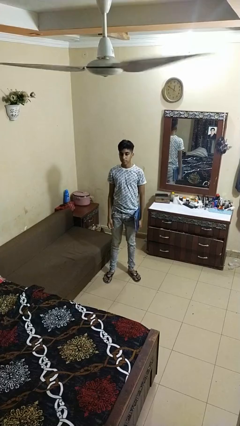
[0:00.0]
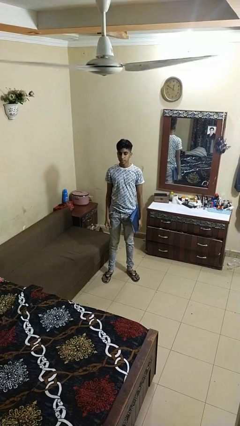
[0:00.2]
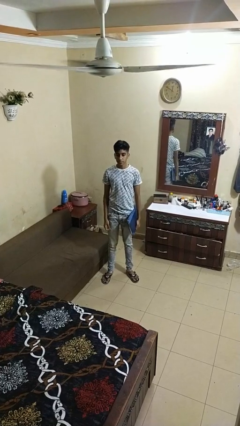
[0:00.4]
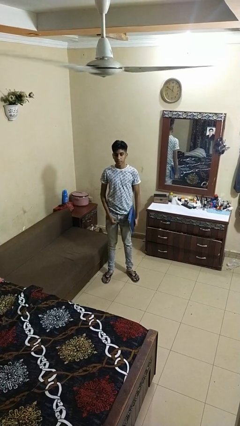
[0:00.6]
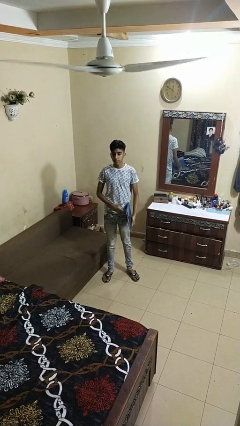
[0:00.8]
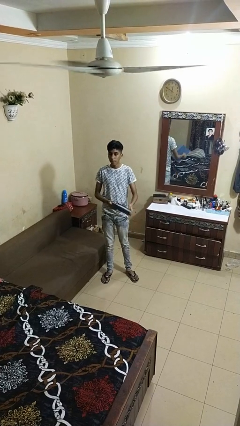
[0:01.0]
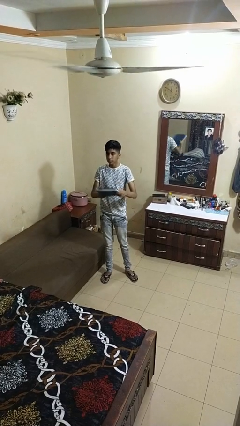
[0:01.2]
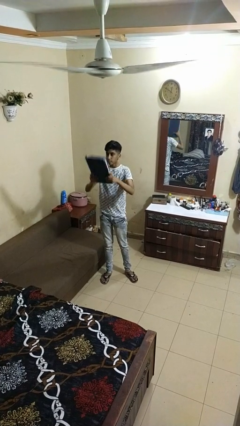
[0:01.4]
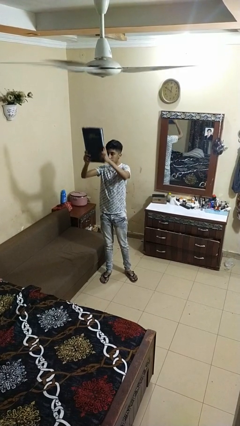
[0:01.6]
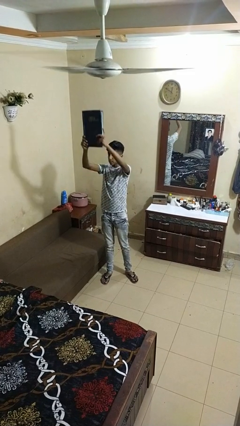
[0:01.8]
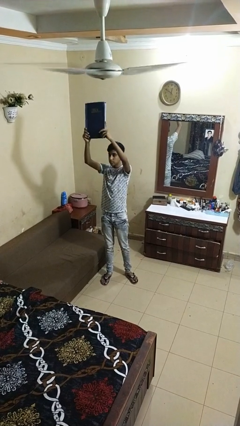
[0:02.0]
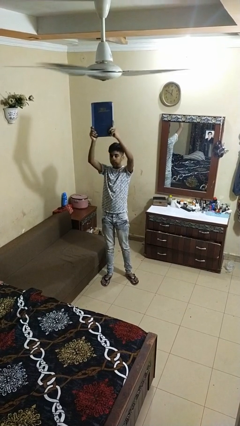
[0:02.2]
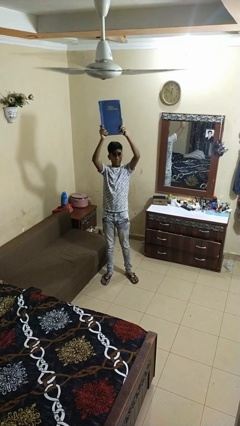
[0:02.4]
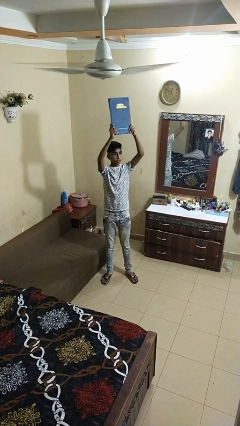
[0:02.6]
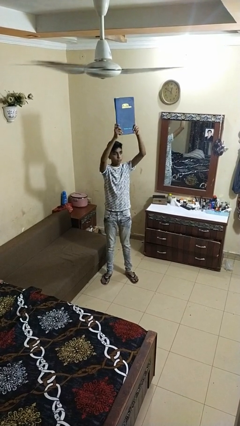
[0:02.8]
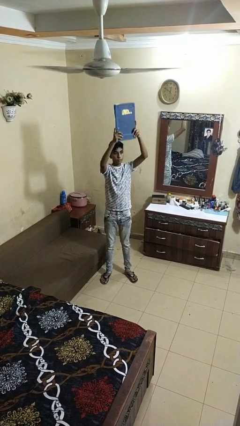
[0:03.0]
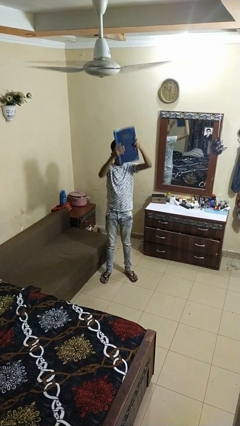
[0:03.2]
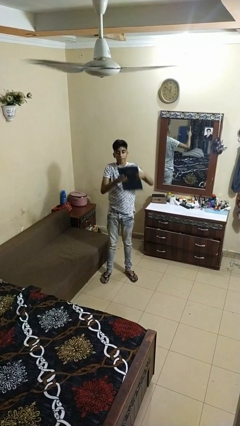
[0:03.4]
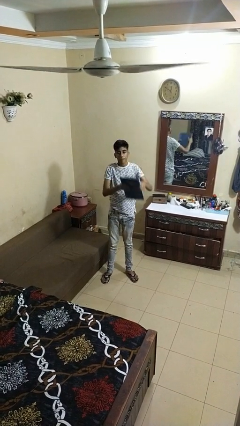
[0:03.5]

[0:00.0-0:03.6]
person holds object above head

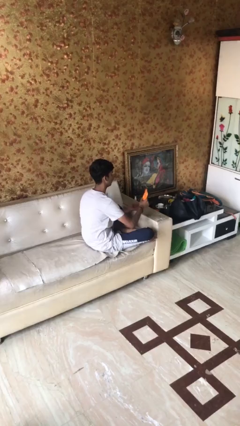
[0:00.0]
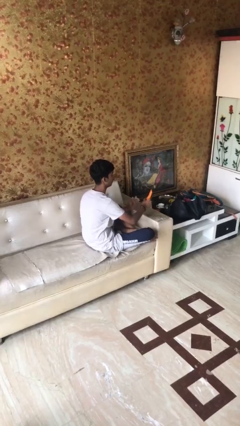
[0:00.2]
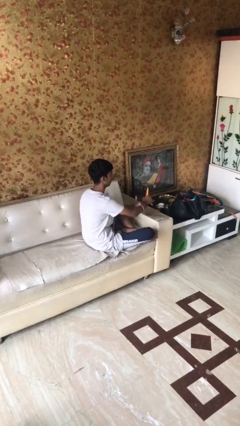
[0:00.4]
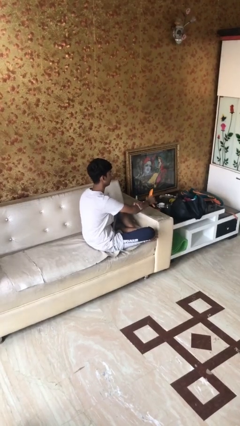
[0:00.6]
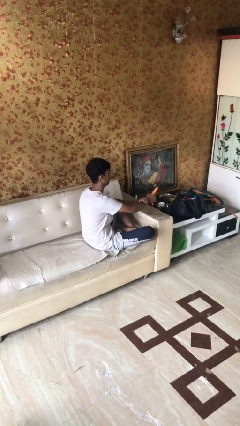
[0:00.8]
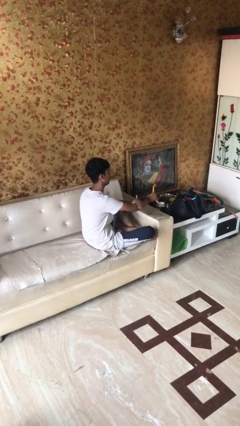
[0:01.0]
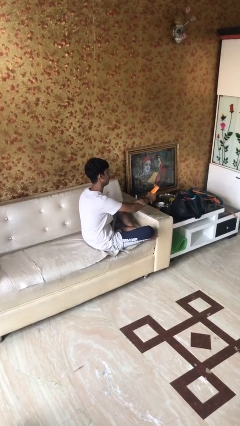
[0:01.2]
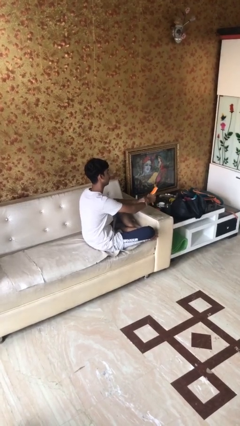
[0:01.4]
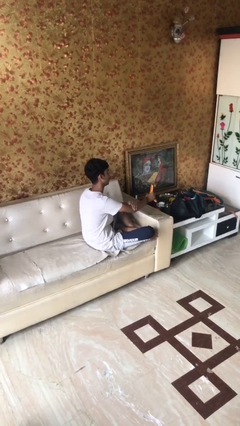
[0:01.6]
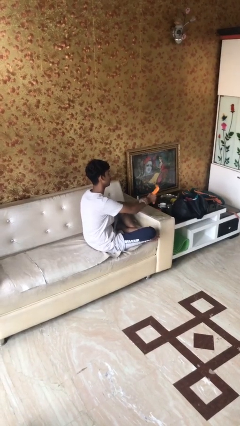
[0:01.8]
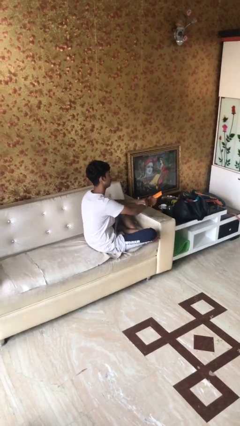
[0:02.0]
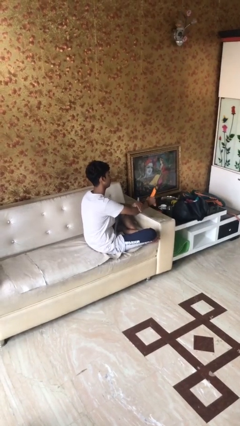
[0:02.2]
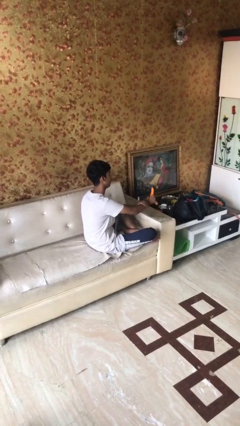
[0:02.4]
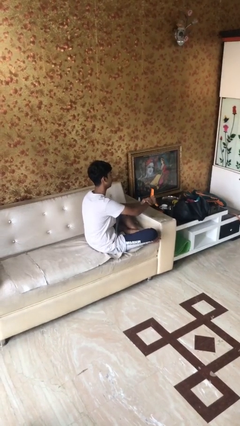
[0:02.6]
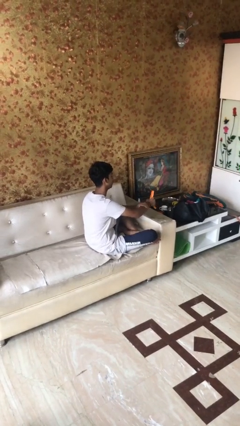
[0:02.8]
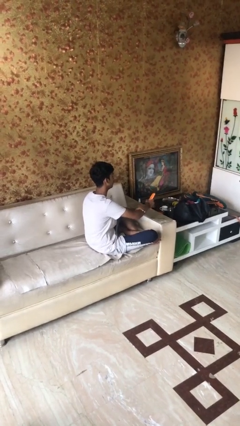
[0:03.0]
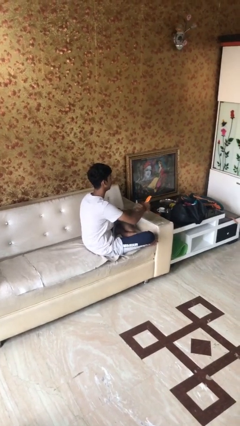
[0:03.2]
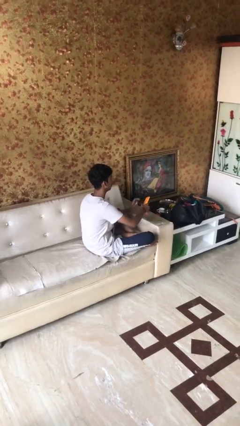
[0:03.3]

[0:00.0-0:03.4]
person applies sunscreen

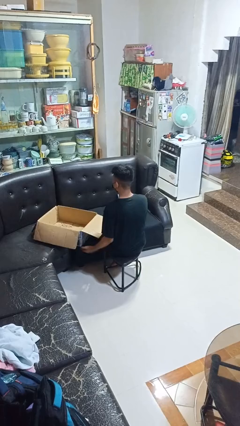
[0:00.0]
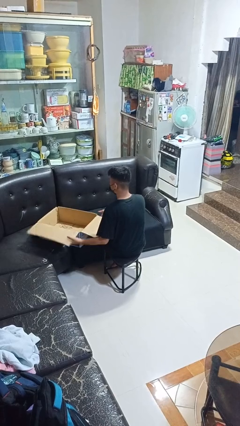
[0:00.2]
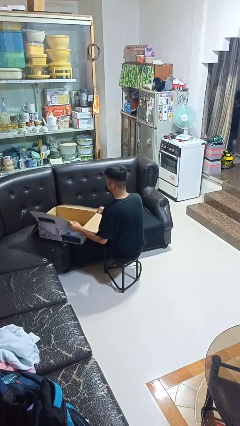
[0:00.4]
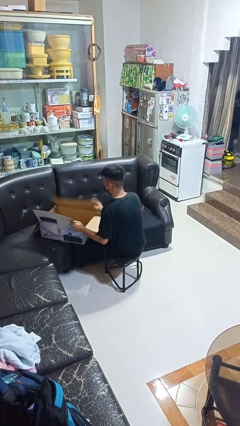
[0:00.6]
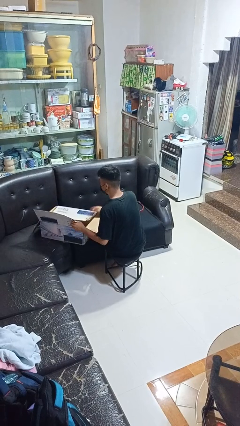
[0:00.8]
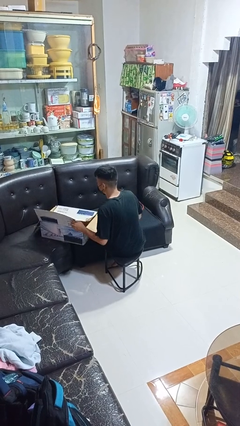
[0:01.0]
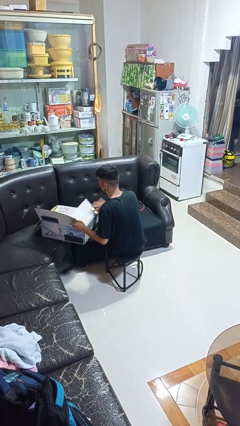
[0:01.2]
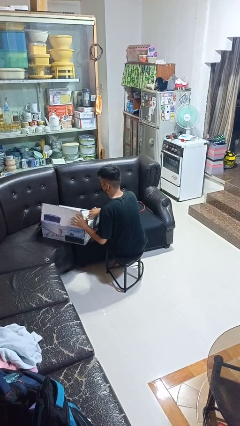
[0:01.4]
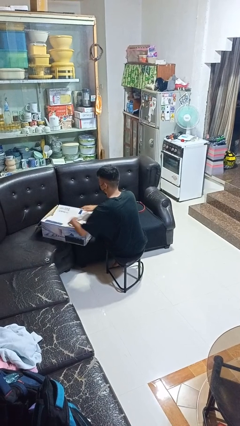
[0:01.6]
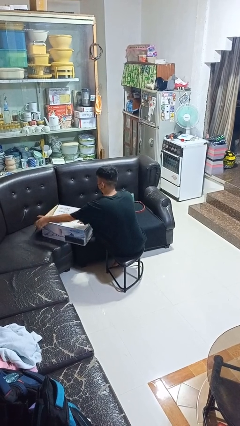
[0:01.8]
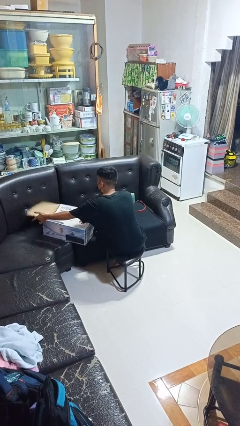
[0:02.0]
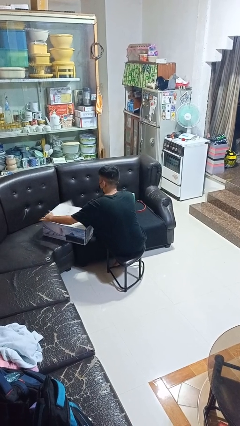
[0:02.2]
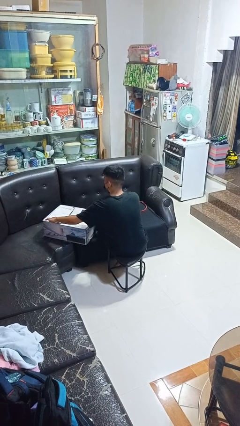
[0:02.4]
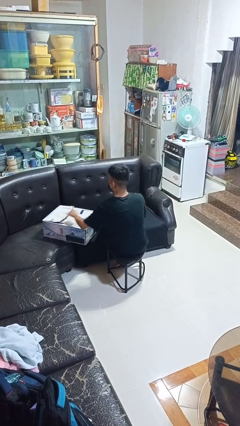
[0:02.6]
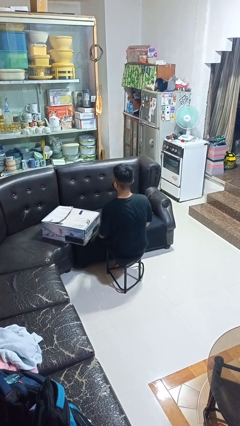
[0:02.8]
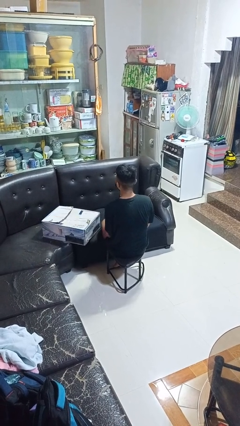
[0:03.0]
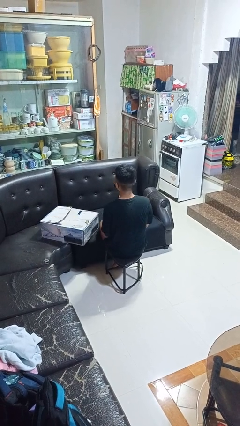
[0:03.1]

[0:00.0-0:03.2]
person closes box

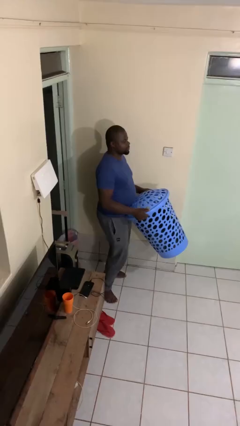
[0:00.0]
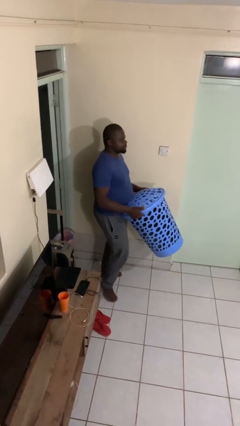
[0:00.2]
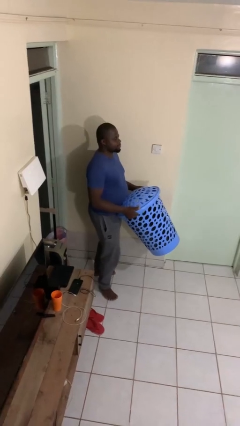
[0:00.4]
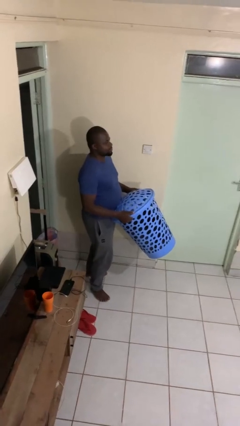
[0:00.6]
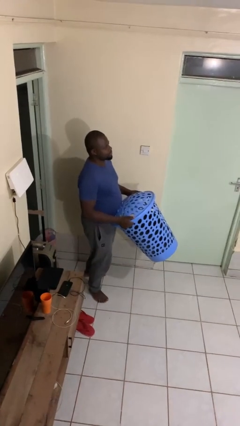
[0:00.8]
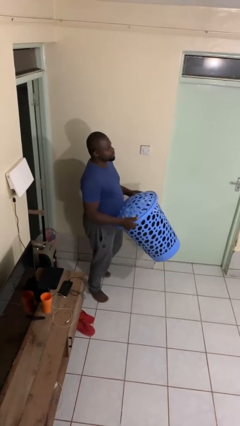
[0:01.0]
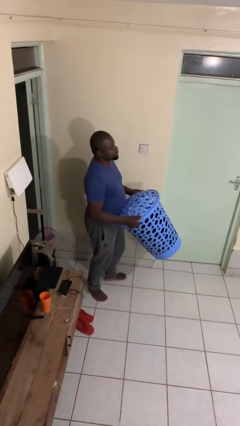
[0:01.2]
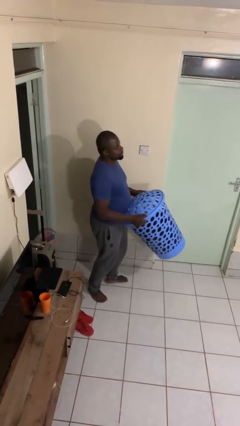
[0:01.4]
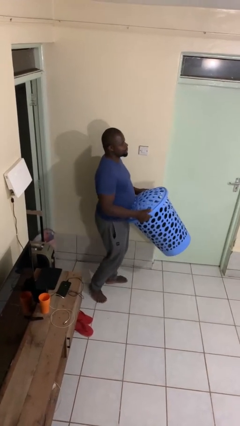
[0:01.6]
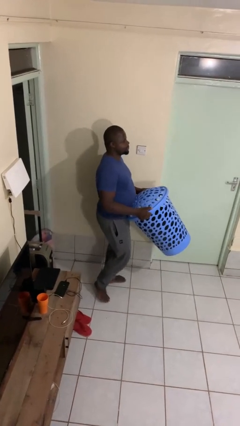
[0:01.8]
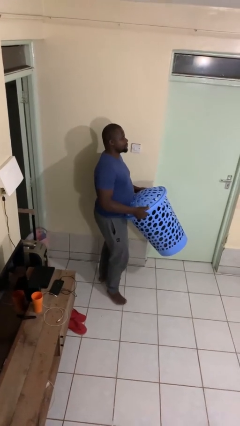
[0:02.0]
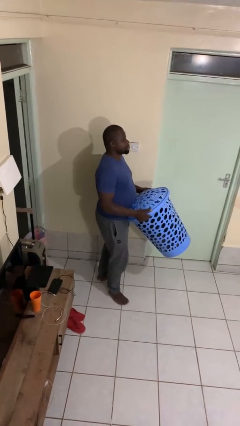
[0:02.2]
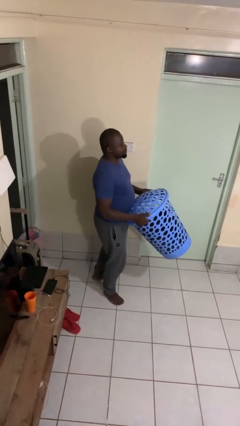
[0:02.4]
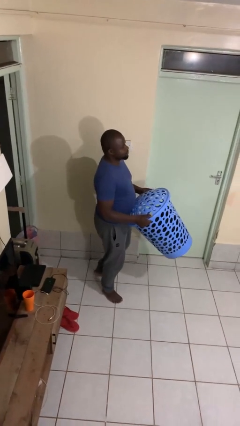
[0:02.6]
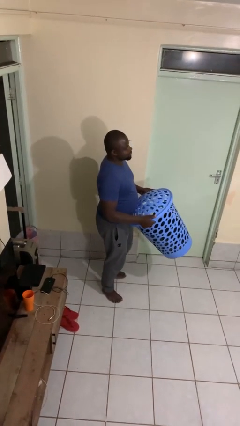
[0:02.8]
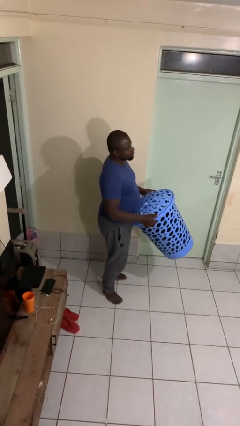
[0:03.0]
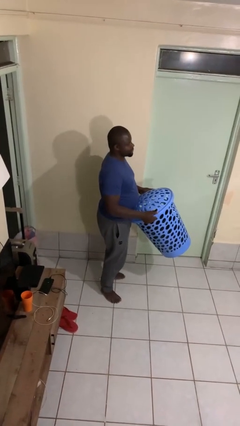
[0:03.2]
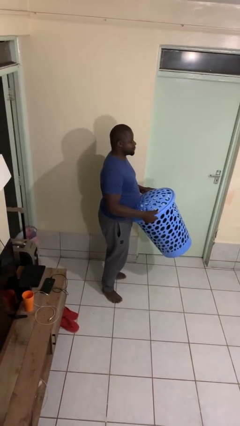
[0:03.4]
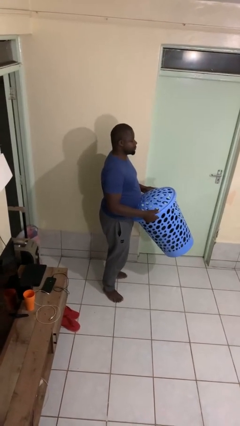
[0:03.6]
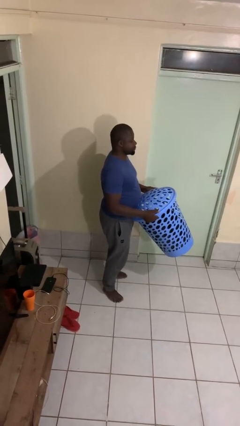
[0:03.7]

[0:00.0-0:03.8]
person carries laundry basket

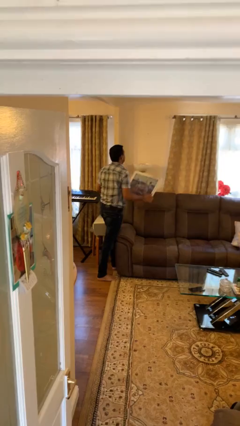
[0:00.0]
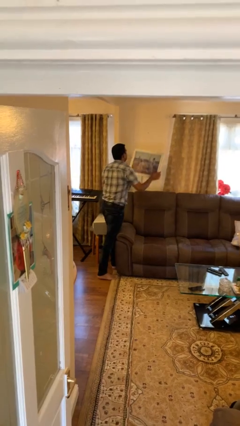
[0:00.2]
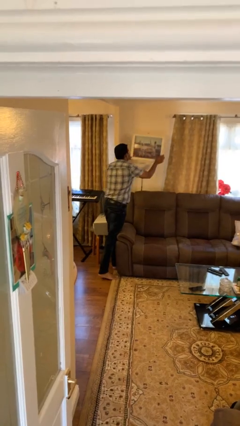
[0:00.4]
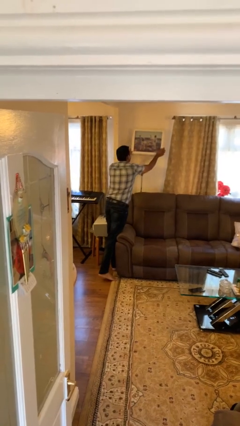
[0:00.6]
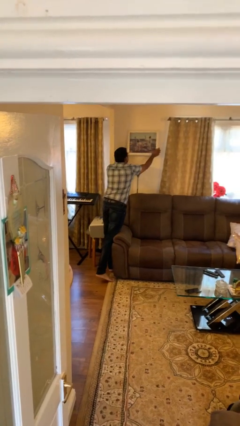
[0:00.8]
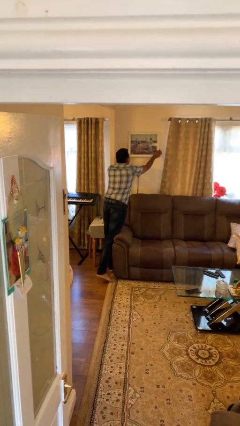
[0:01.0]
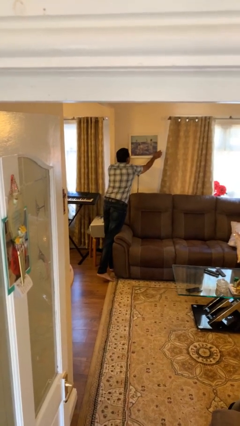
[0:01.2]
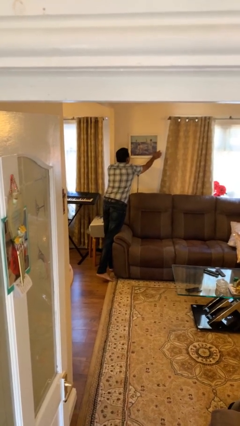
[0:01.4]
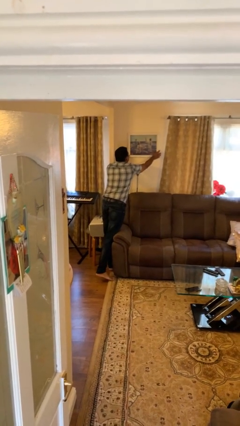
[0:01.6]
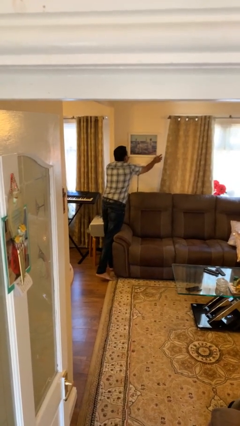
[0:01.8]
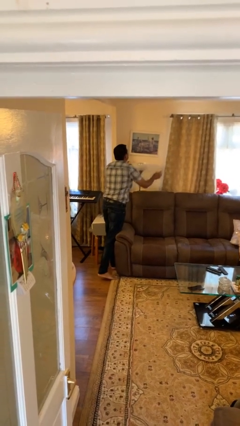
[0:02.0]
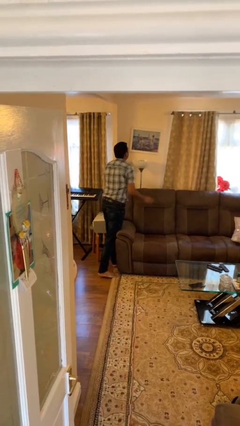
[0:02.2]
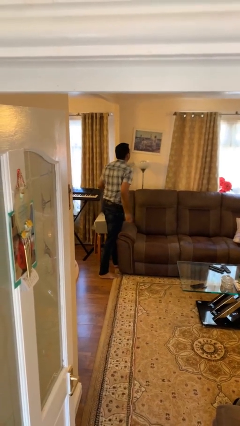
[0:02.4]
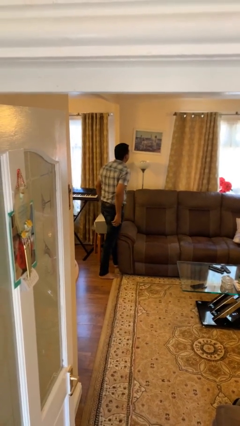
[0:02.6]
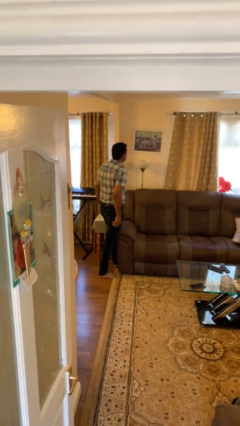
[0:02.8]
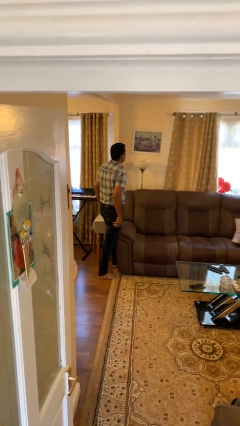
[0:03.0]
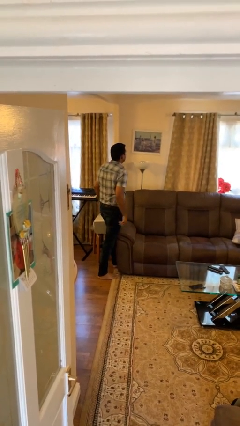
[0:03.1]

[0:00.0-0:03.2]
person puts up picture frame

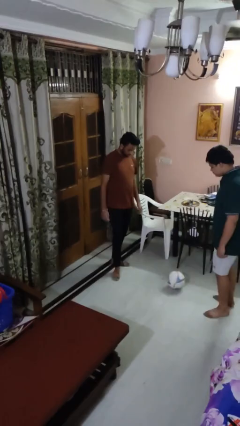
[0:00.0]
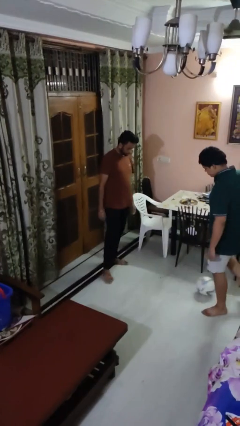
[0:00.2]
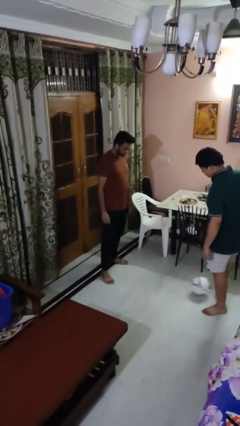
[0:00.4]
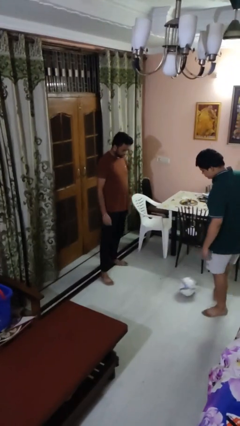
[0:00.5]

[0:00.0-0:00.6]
person kicks object to person
